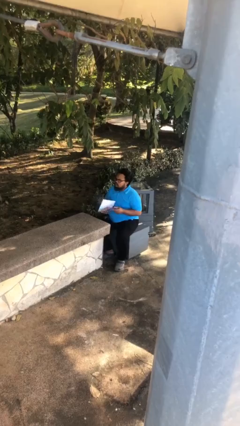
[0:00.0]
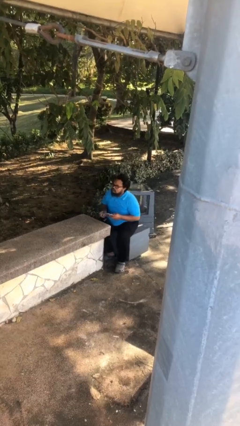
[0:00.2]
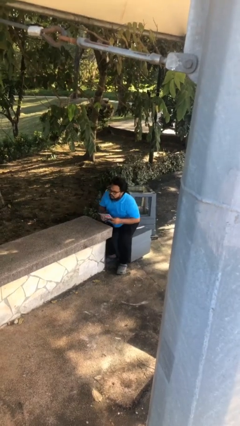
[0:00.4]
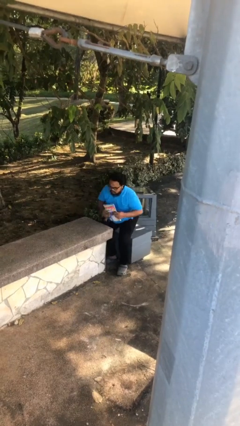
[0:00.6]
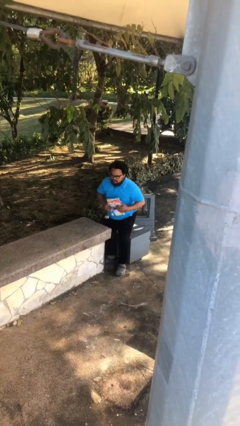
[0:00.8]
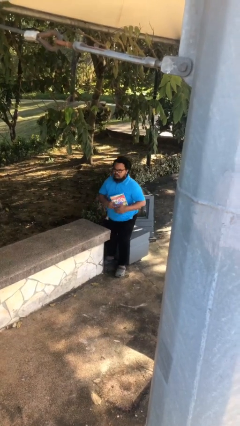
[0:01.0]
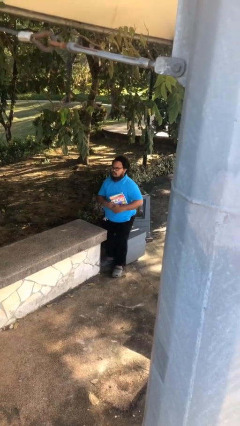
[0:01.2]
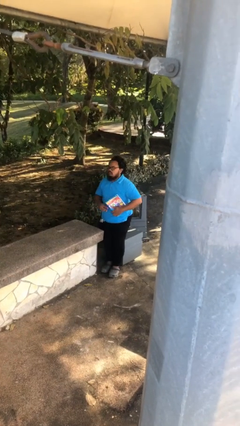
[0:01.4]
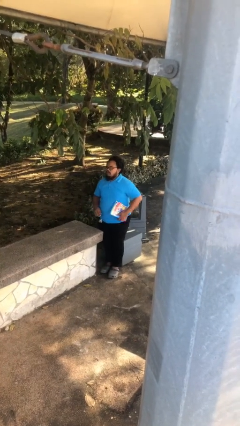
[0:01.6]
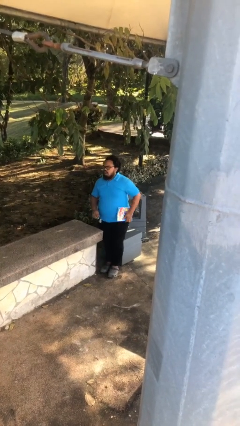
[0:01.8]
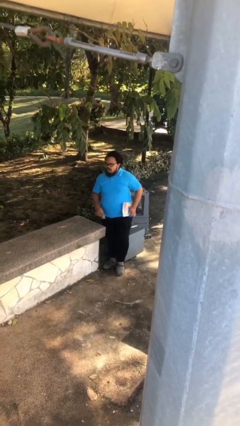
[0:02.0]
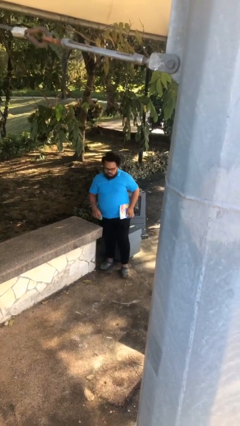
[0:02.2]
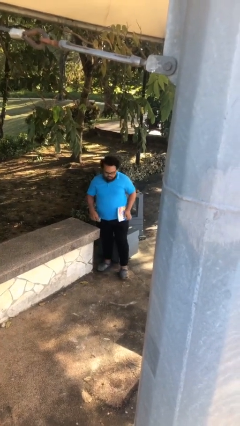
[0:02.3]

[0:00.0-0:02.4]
person stands up

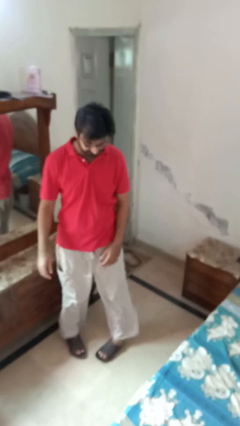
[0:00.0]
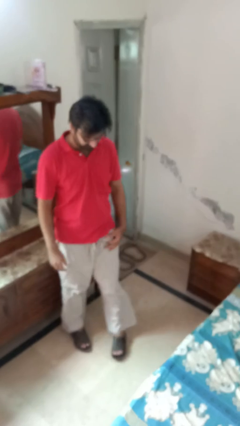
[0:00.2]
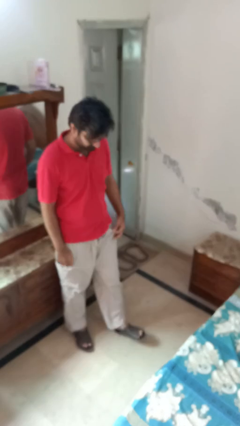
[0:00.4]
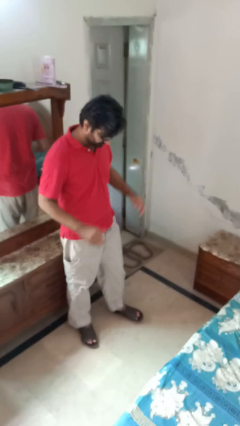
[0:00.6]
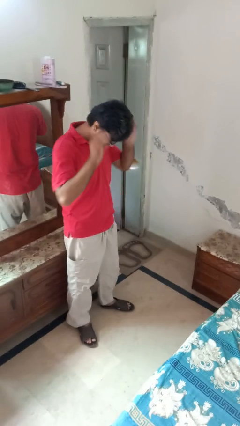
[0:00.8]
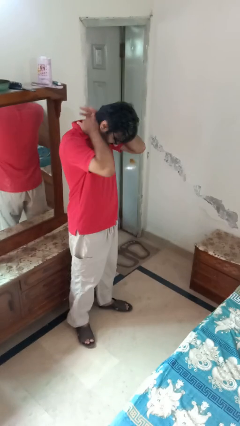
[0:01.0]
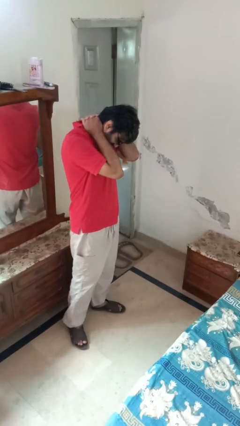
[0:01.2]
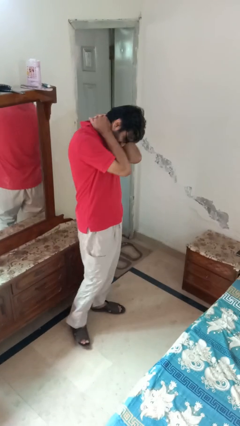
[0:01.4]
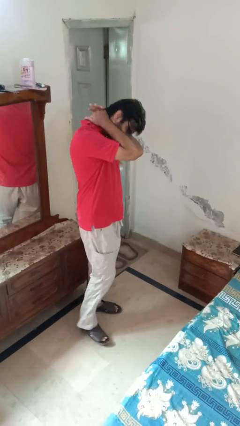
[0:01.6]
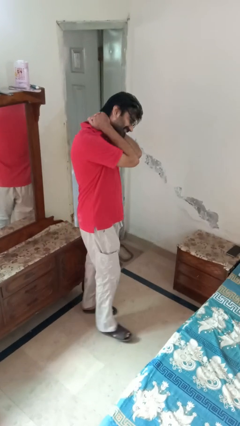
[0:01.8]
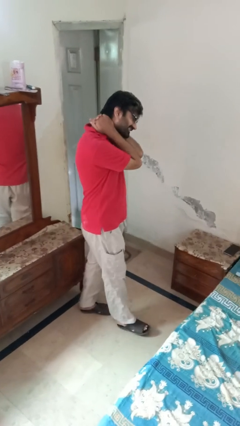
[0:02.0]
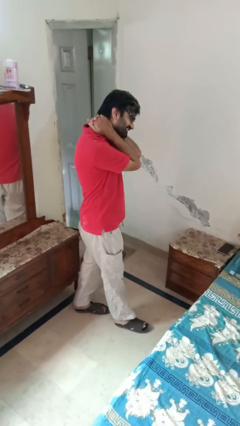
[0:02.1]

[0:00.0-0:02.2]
person rubs neck

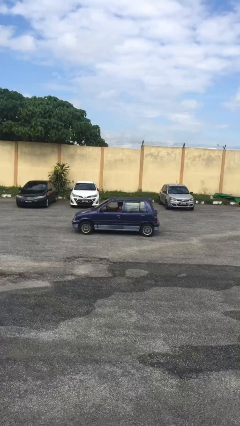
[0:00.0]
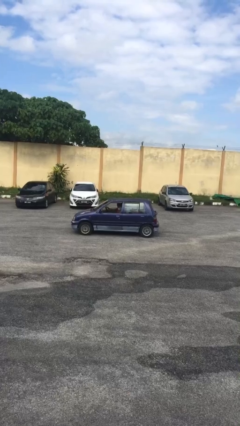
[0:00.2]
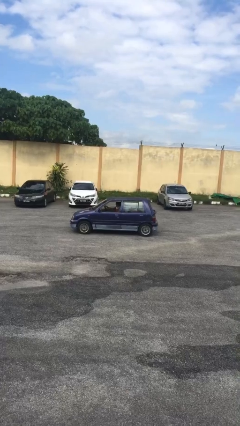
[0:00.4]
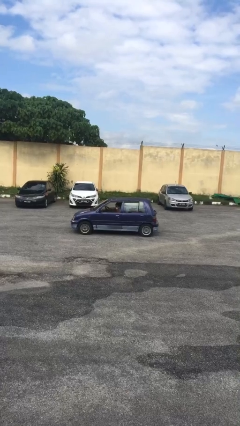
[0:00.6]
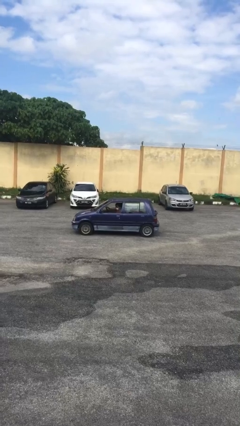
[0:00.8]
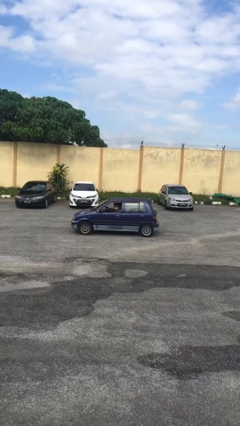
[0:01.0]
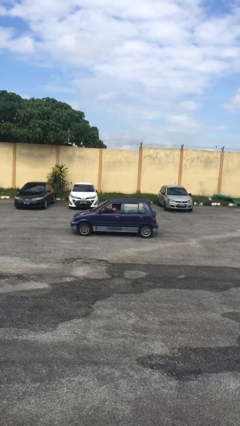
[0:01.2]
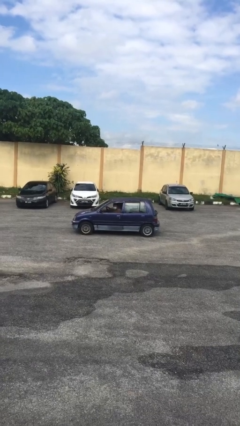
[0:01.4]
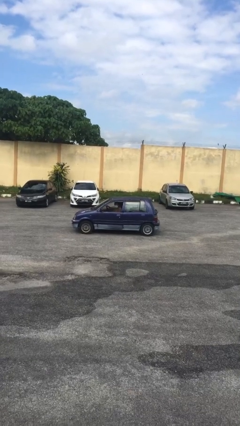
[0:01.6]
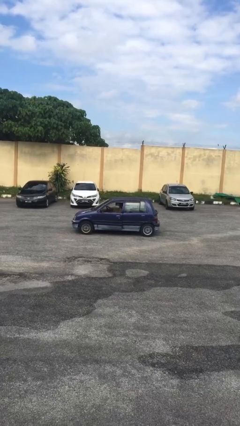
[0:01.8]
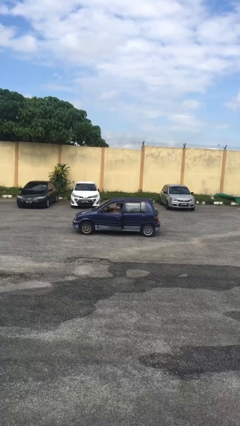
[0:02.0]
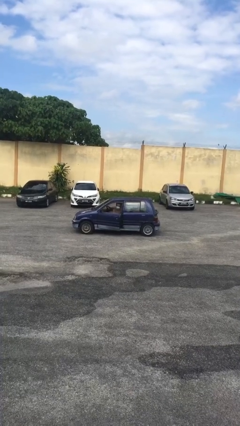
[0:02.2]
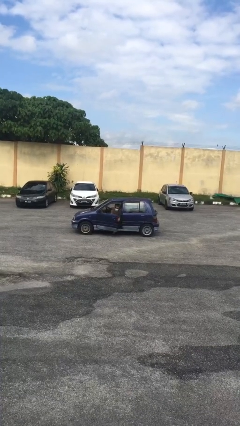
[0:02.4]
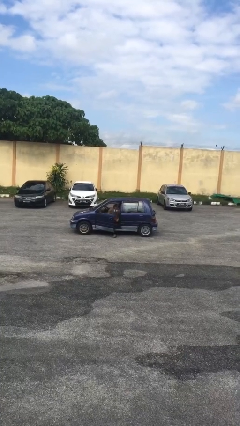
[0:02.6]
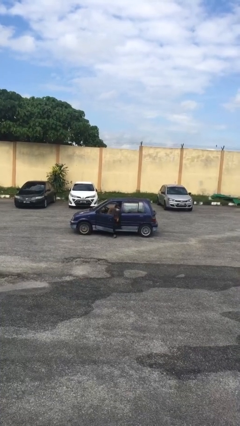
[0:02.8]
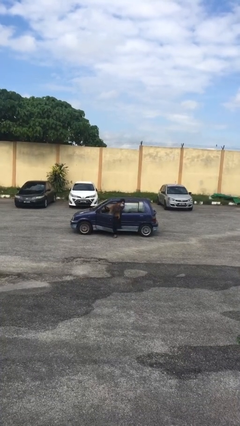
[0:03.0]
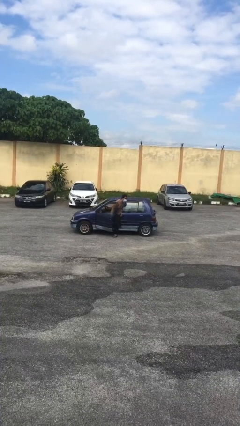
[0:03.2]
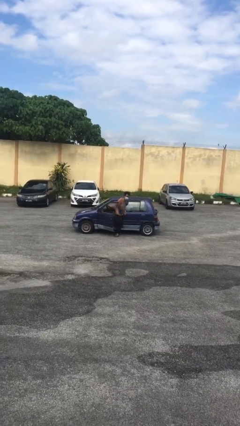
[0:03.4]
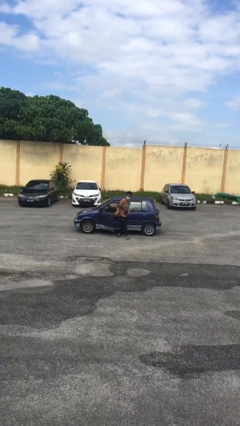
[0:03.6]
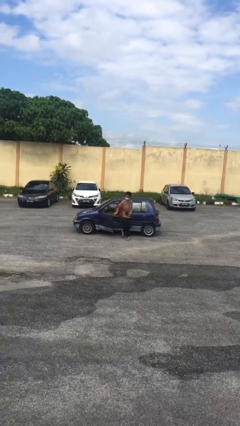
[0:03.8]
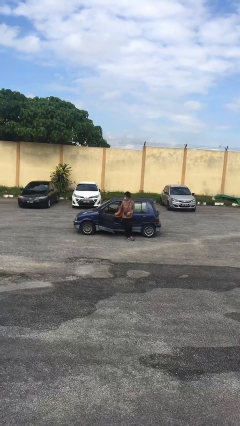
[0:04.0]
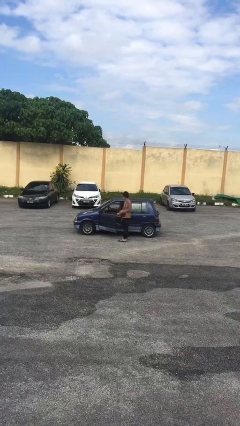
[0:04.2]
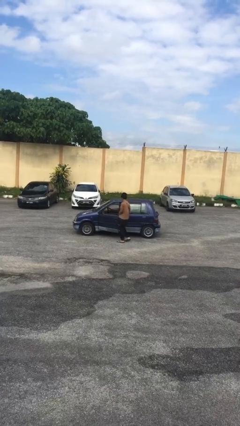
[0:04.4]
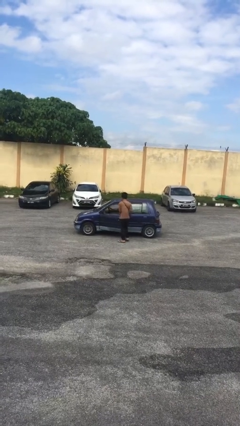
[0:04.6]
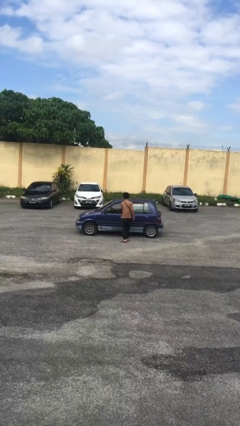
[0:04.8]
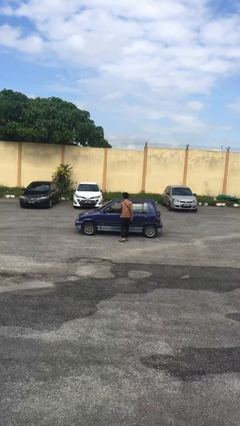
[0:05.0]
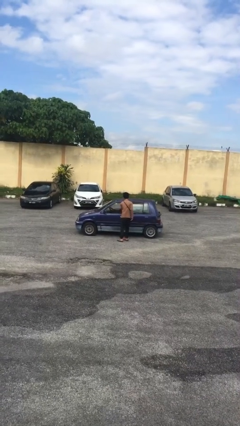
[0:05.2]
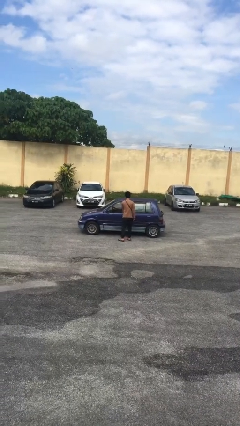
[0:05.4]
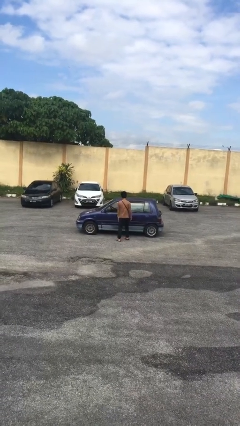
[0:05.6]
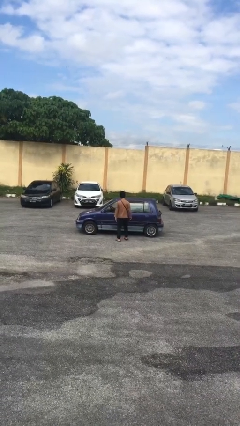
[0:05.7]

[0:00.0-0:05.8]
car drops off person

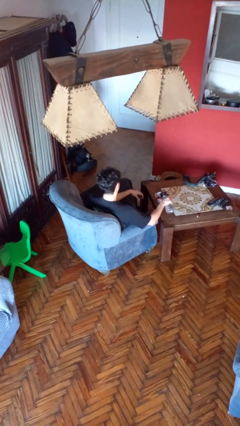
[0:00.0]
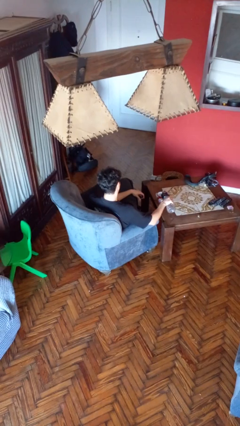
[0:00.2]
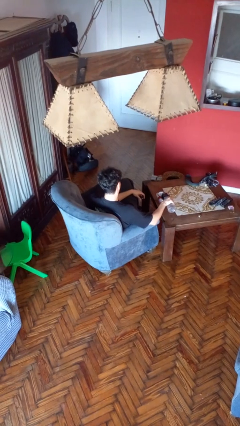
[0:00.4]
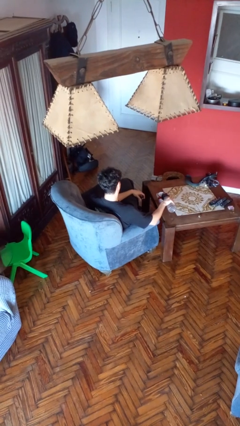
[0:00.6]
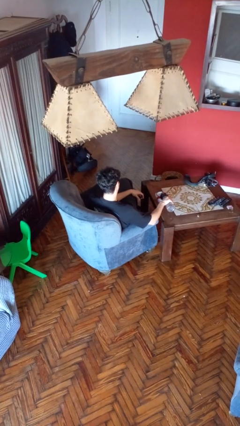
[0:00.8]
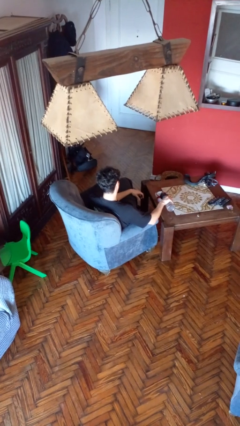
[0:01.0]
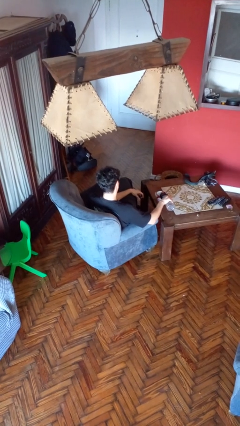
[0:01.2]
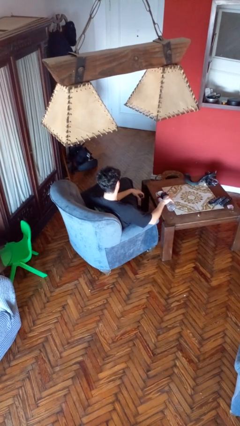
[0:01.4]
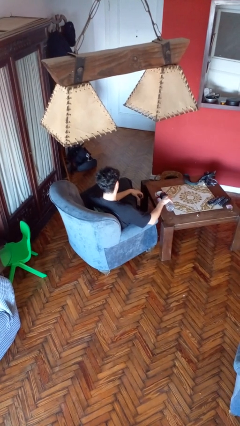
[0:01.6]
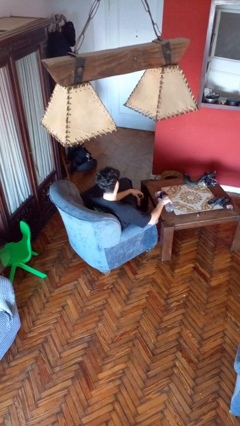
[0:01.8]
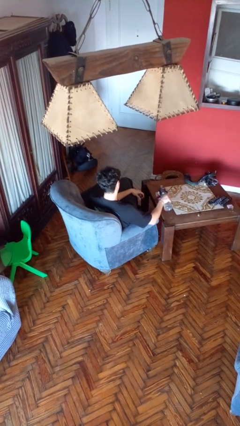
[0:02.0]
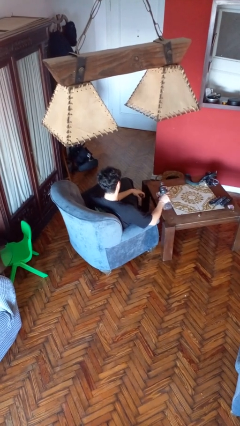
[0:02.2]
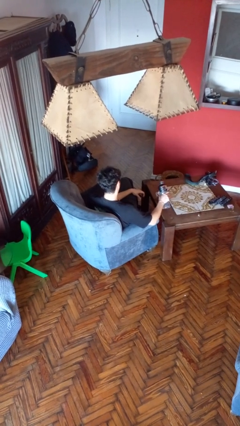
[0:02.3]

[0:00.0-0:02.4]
person pours liquid into cup

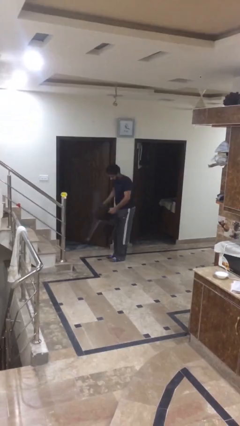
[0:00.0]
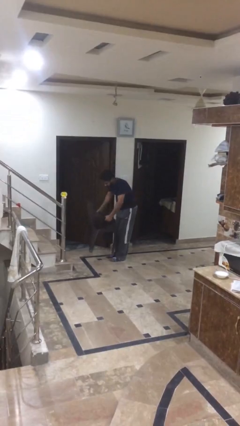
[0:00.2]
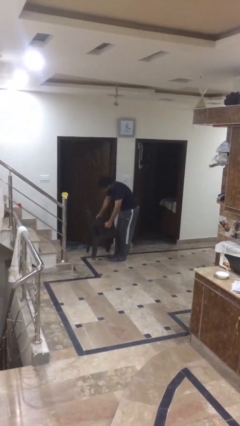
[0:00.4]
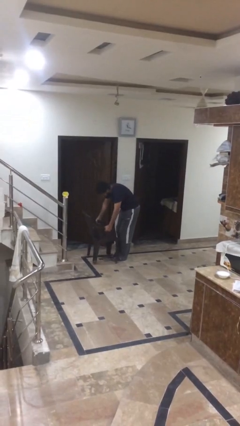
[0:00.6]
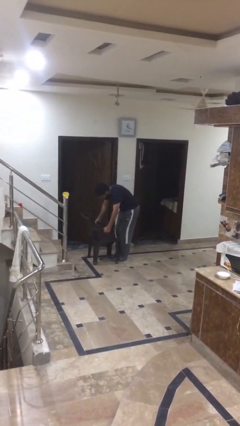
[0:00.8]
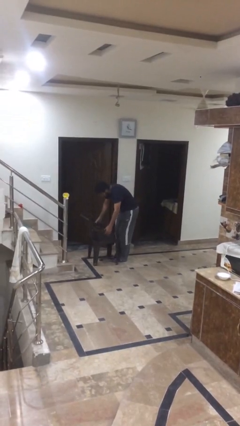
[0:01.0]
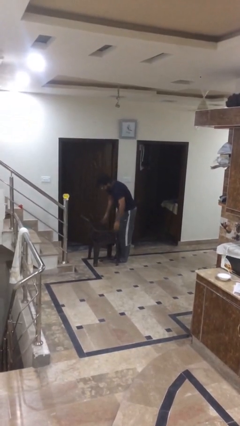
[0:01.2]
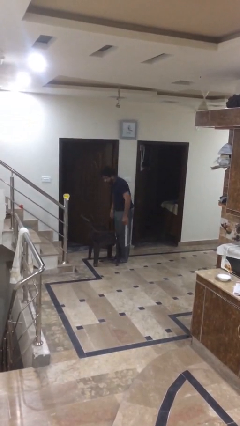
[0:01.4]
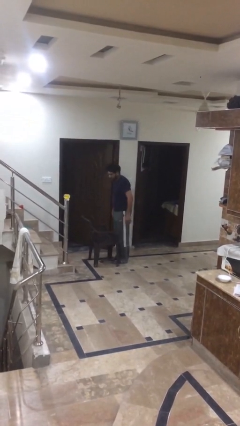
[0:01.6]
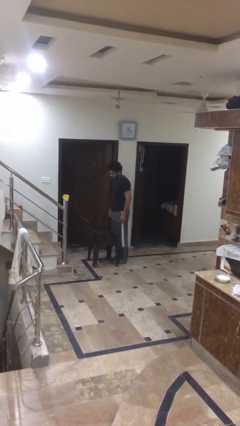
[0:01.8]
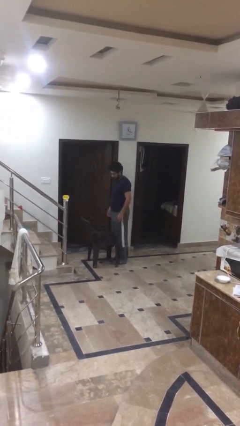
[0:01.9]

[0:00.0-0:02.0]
person puts down object on floor

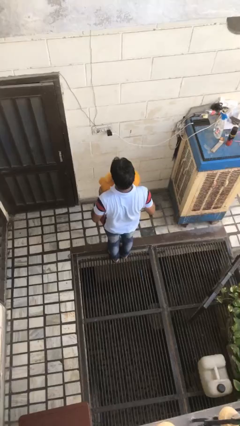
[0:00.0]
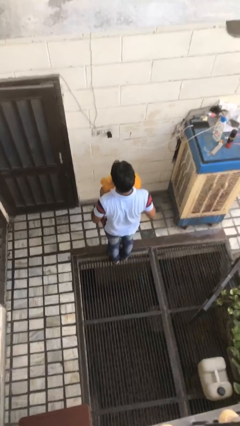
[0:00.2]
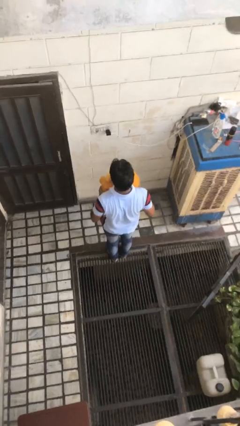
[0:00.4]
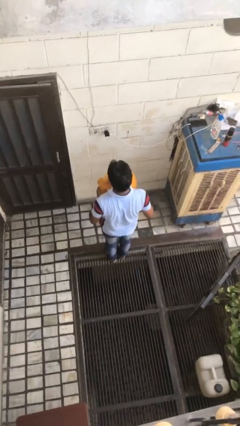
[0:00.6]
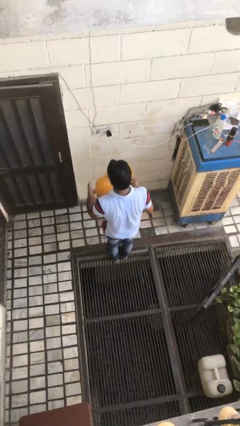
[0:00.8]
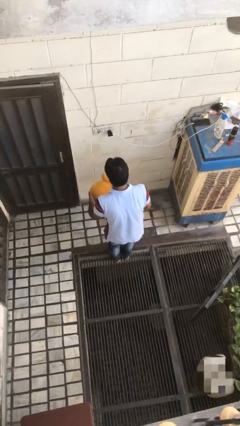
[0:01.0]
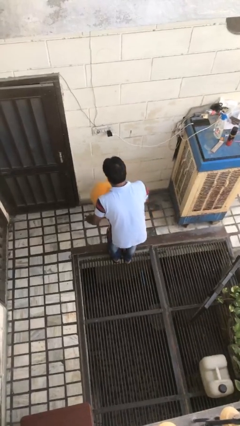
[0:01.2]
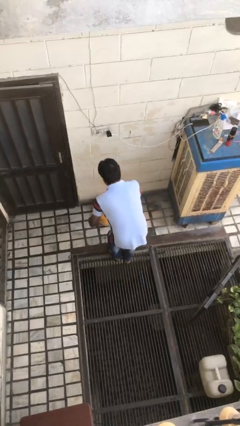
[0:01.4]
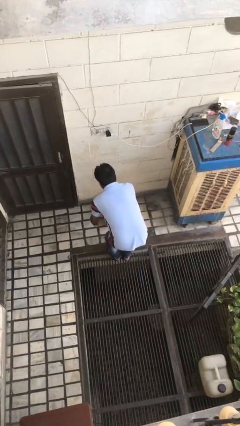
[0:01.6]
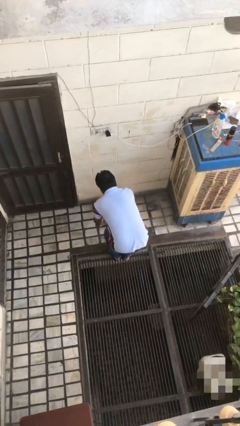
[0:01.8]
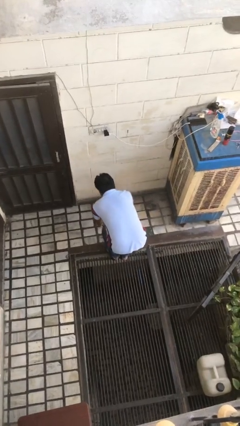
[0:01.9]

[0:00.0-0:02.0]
person throws object to ground

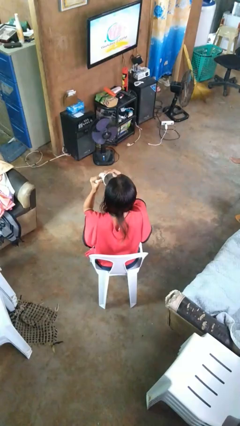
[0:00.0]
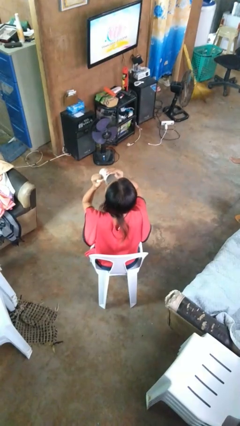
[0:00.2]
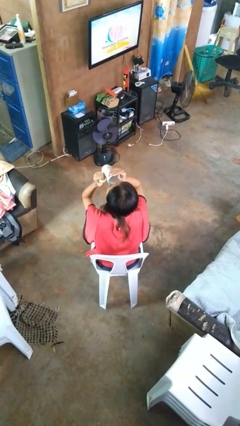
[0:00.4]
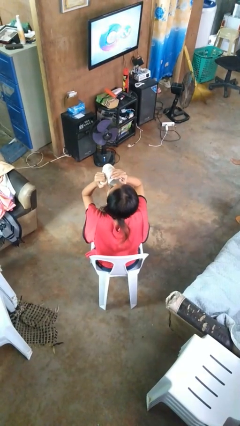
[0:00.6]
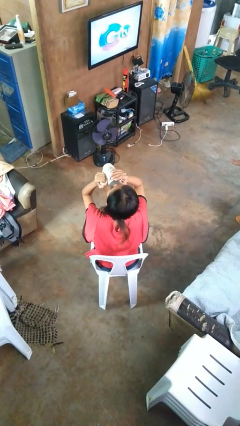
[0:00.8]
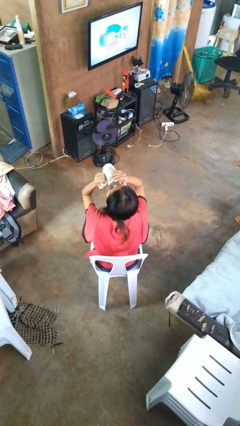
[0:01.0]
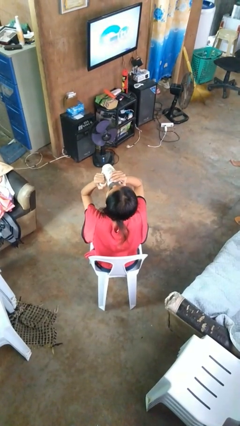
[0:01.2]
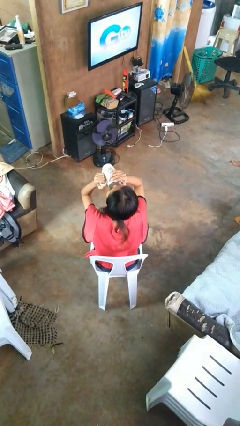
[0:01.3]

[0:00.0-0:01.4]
person drinks from mug
